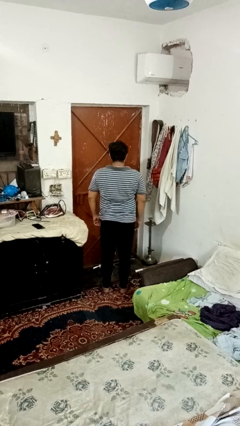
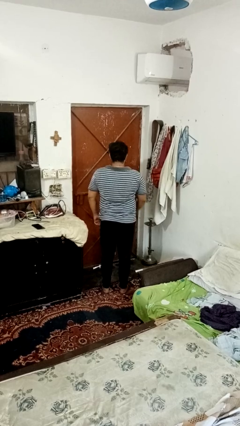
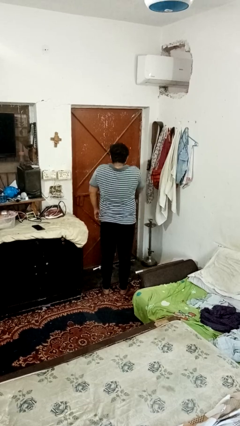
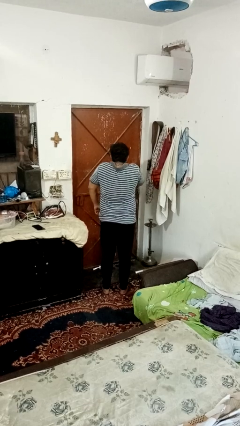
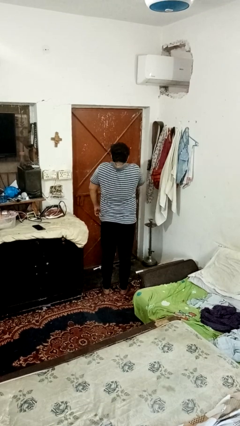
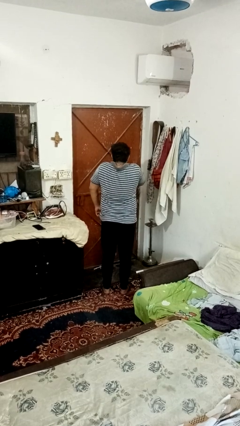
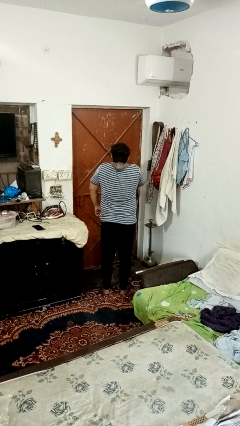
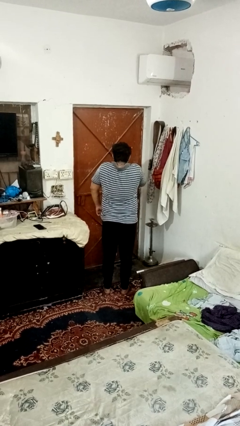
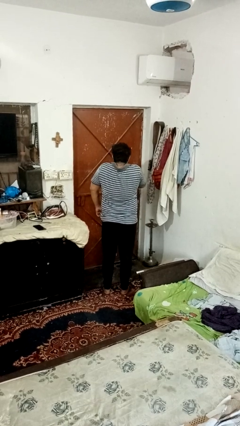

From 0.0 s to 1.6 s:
person shrugs

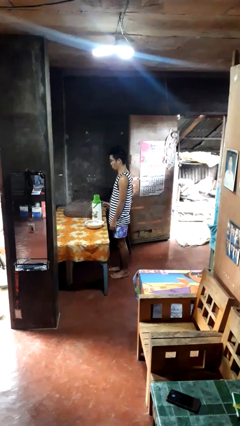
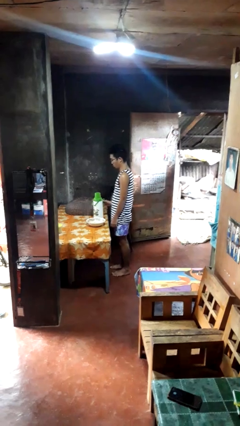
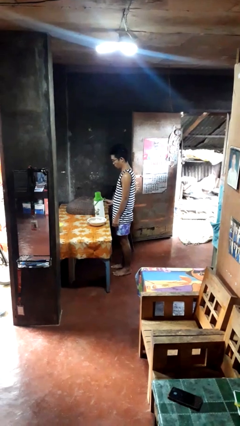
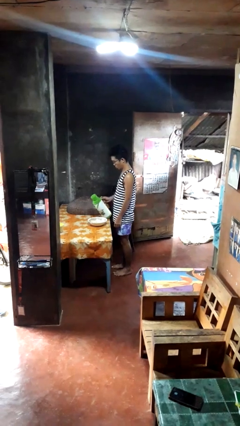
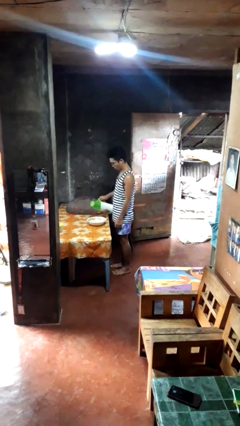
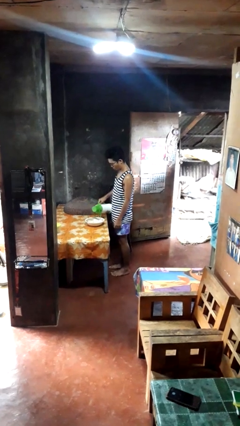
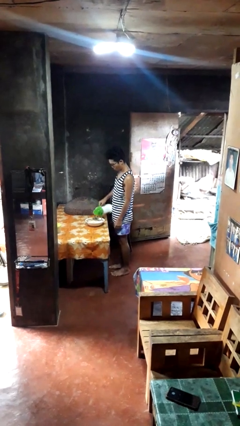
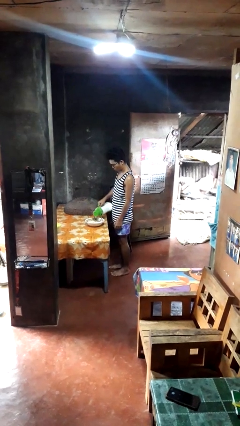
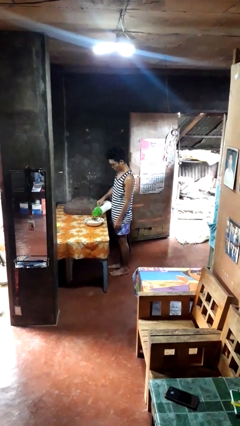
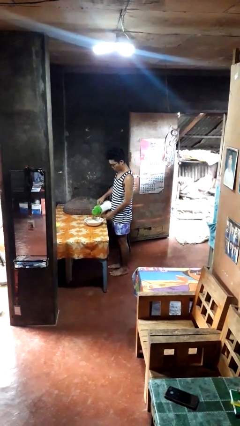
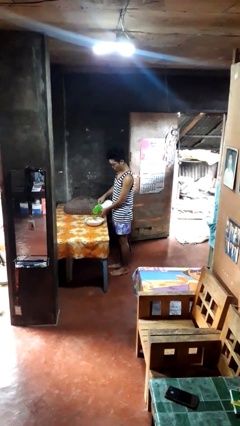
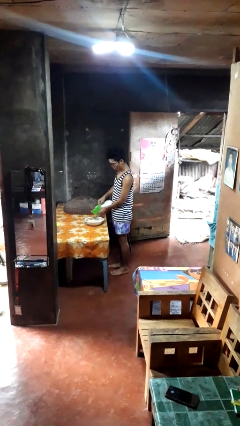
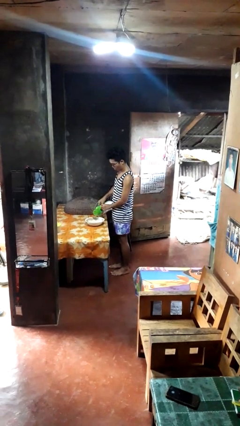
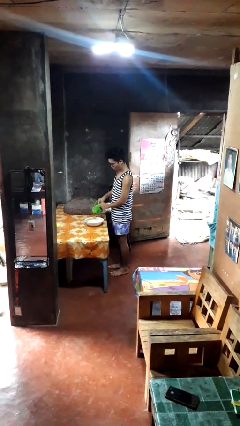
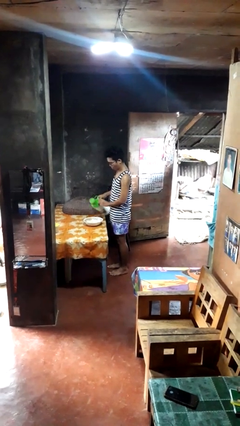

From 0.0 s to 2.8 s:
person pours into bowl

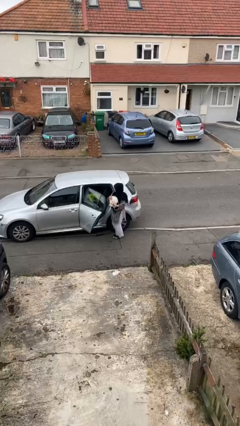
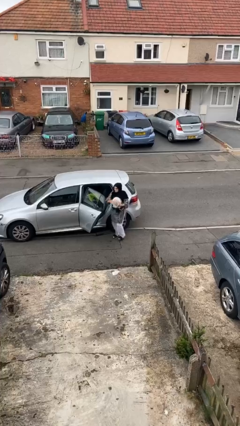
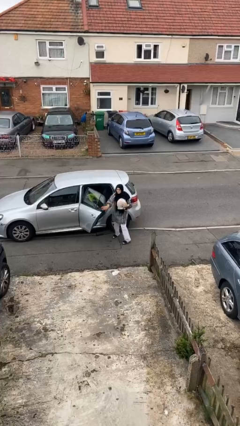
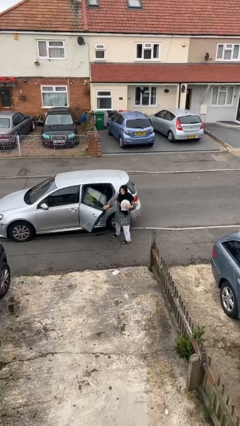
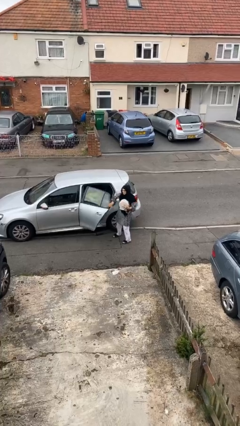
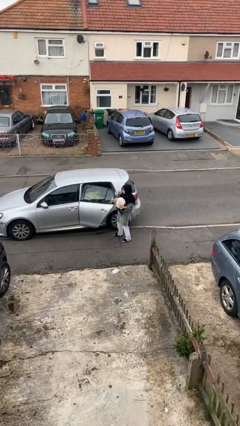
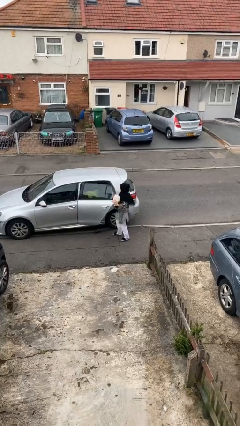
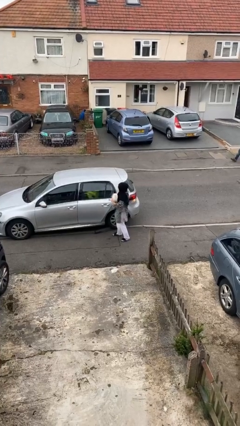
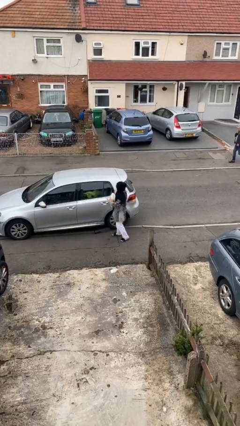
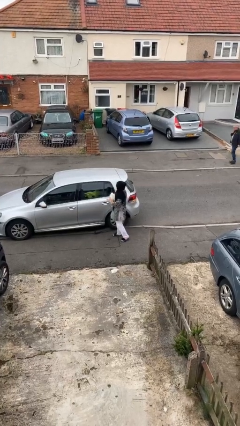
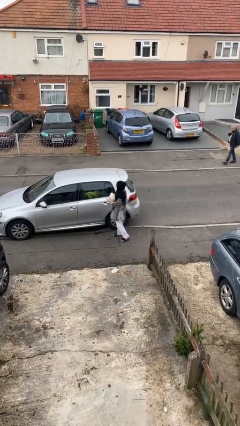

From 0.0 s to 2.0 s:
person closes car door

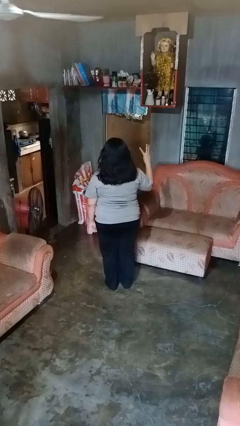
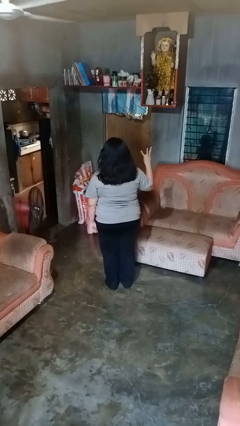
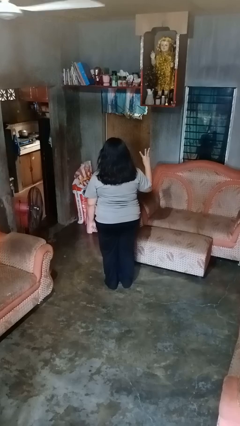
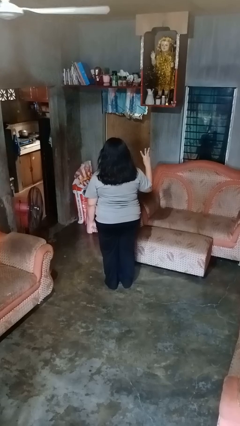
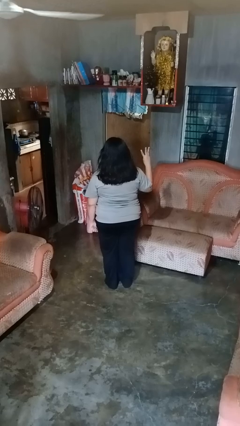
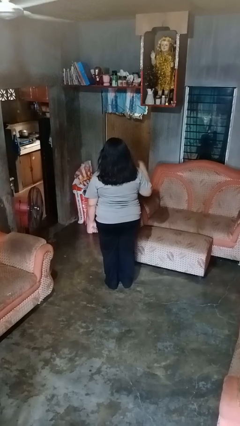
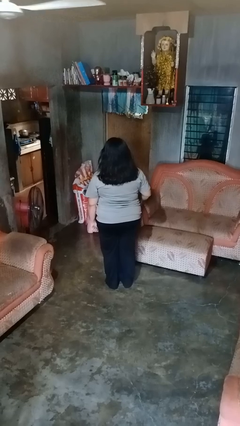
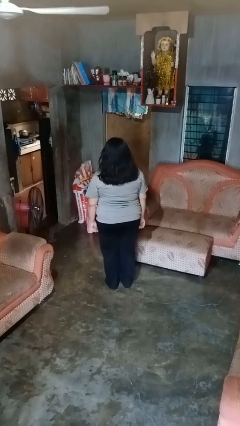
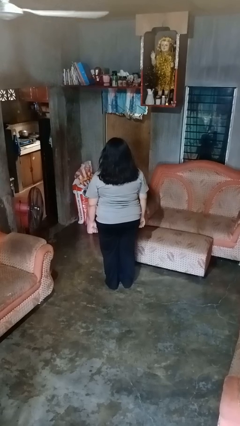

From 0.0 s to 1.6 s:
person gestures number three

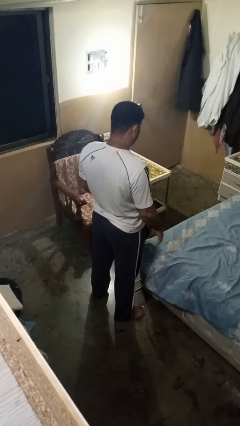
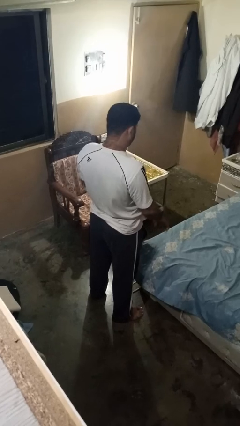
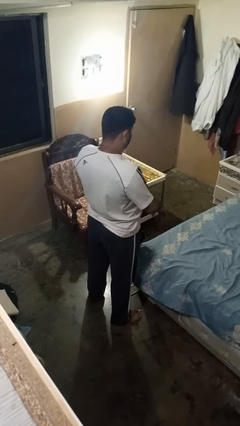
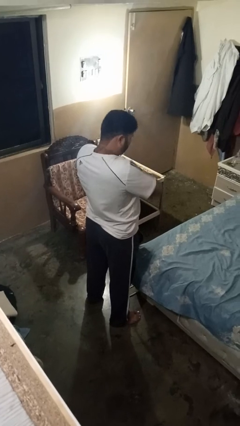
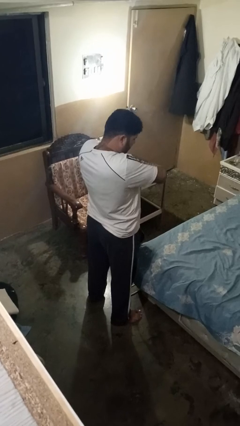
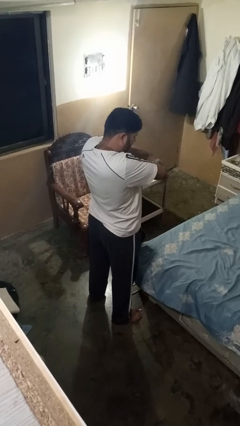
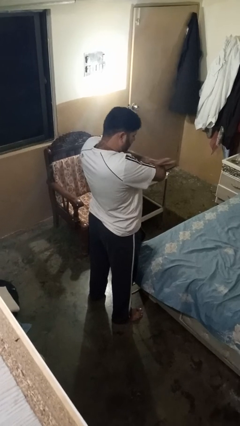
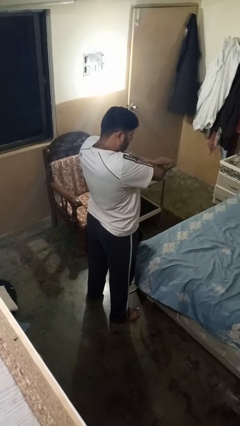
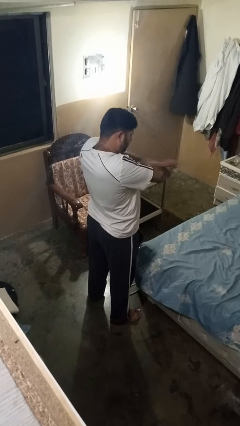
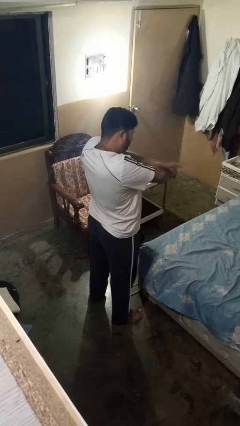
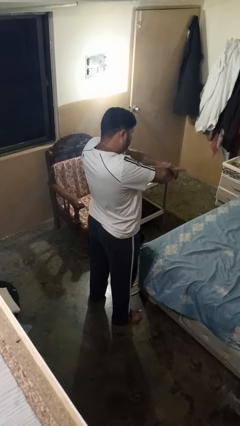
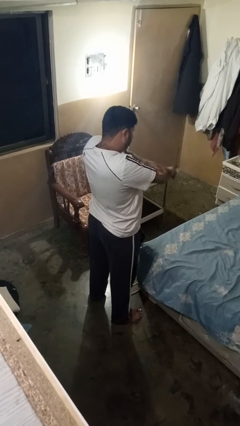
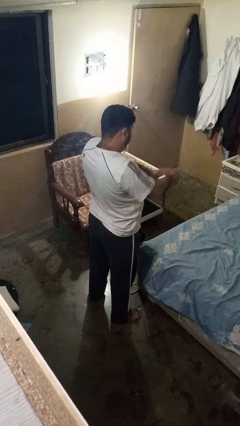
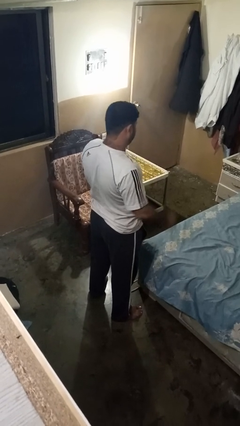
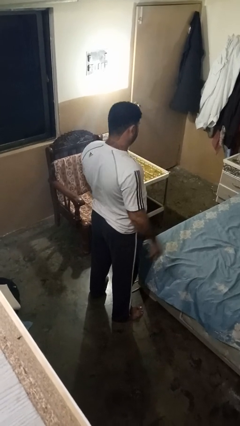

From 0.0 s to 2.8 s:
person swats bug

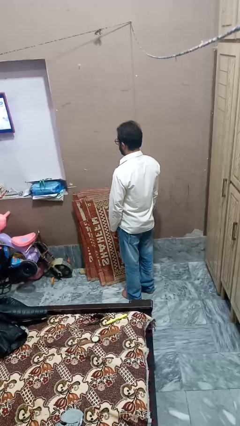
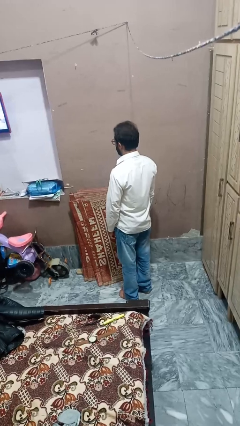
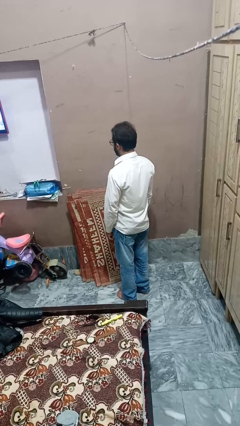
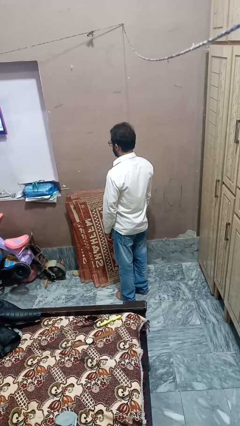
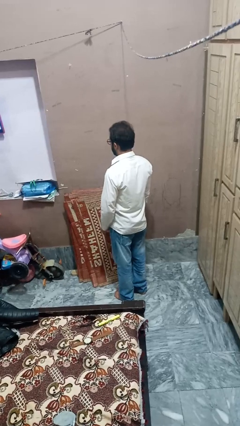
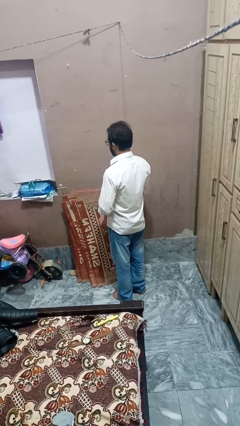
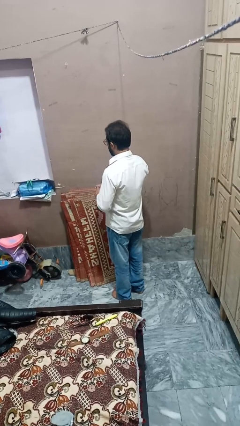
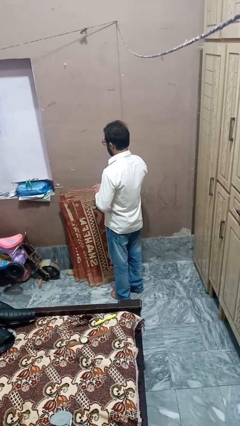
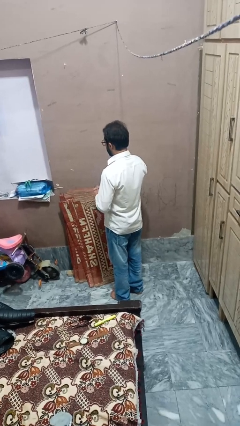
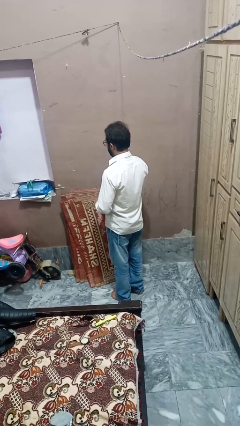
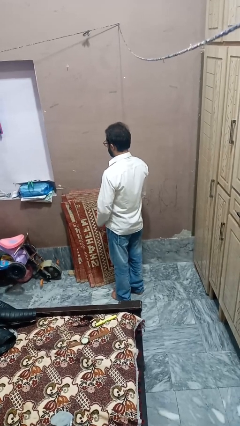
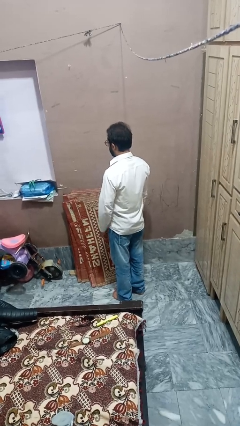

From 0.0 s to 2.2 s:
person puts on ring

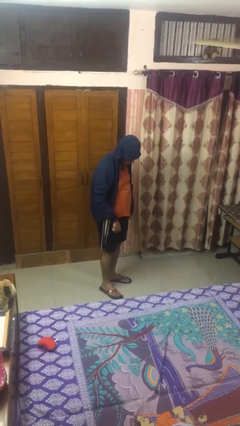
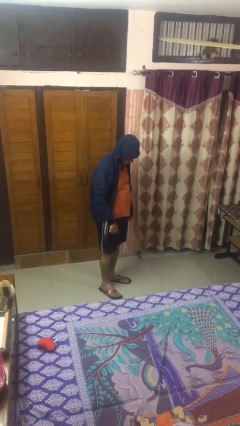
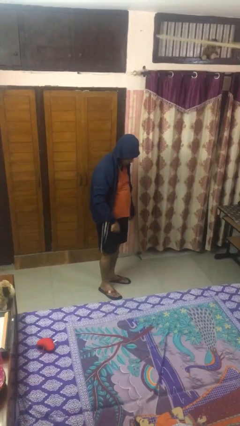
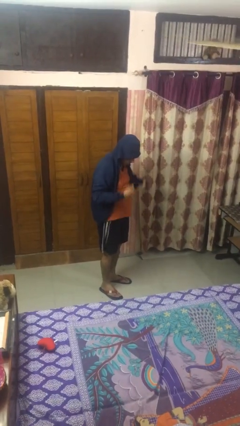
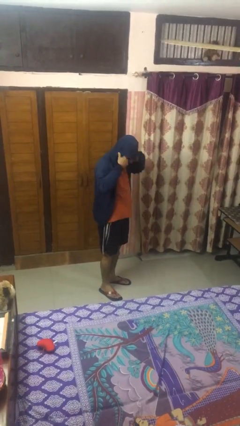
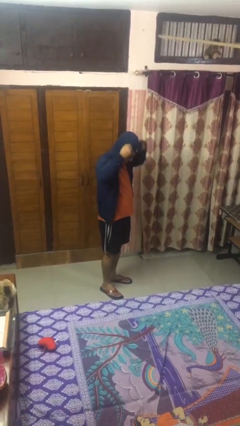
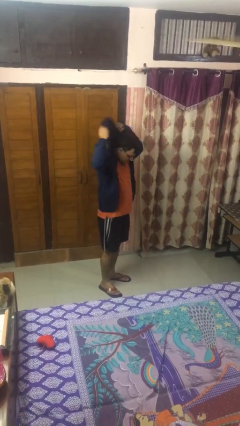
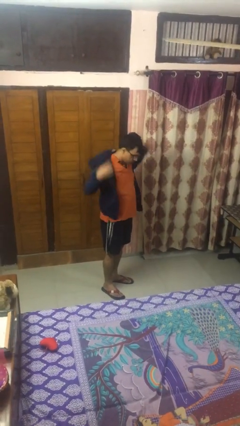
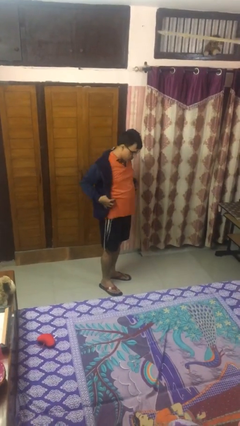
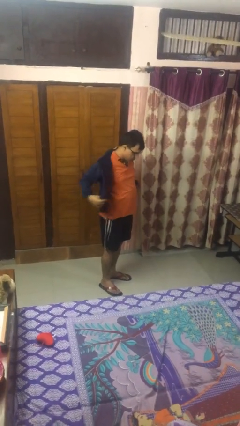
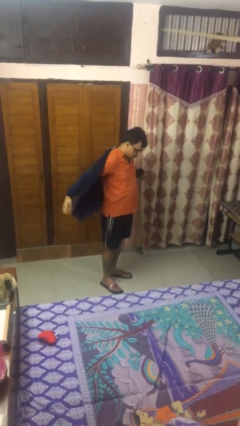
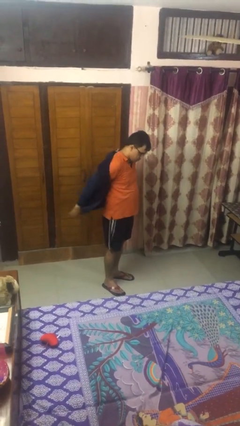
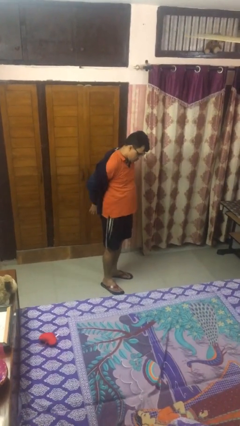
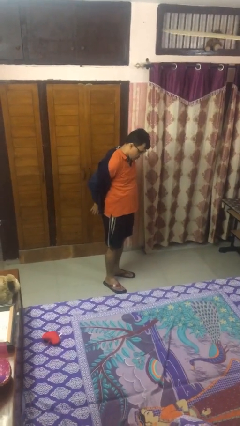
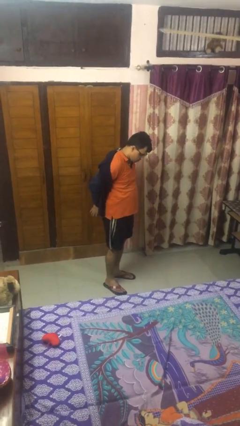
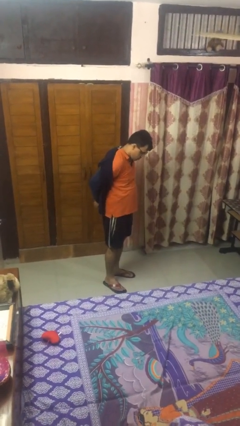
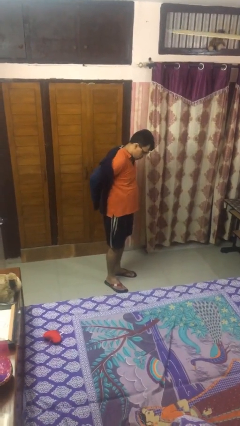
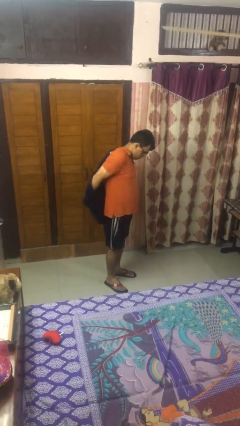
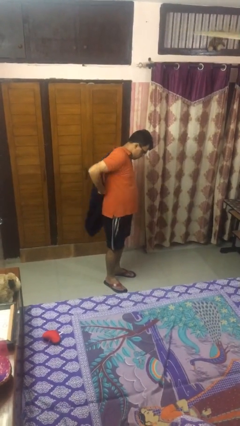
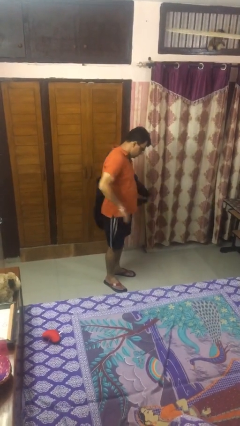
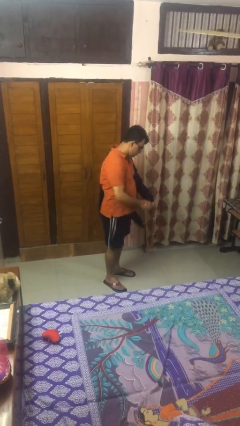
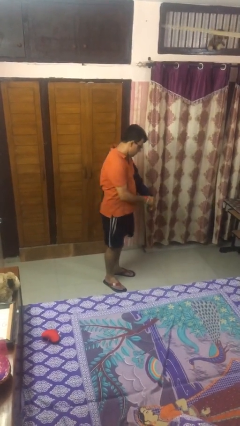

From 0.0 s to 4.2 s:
person takes off hoodie

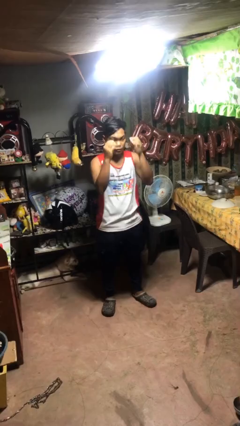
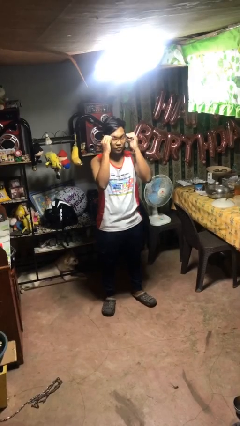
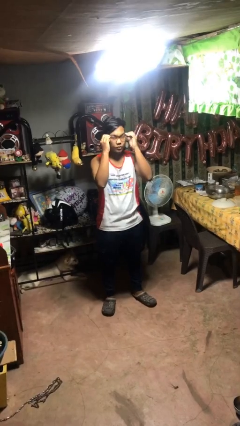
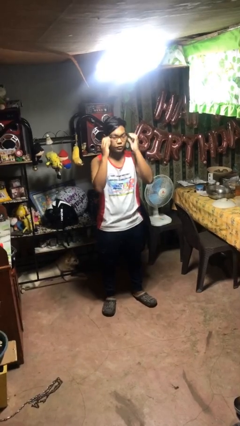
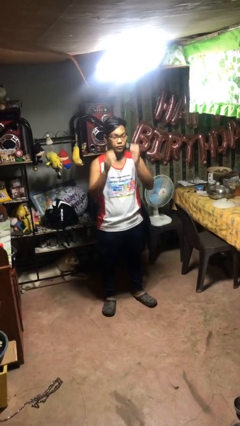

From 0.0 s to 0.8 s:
person puts on glasses
